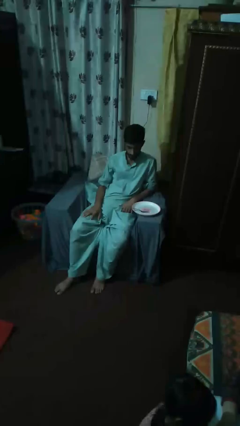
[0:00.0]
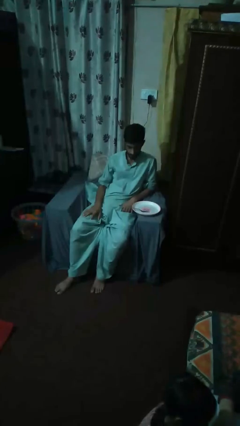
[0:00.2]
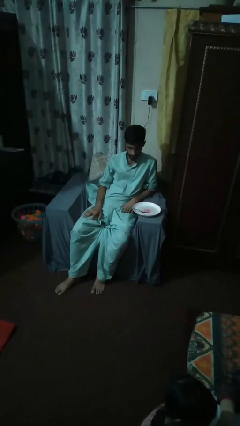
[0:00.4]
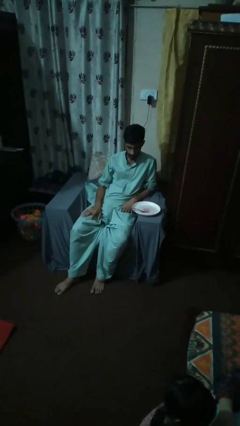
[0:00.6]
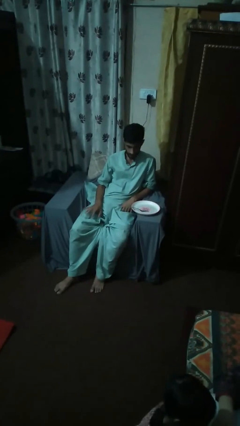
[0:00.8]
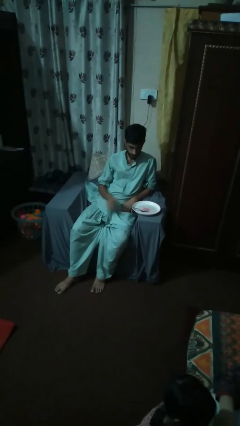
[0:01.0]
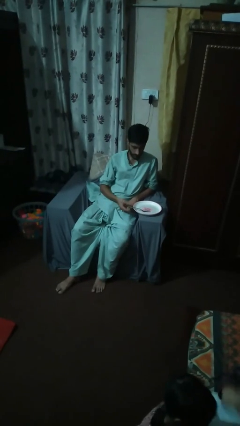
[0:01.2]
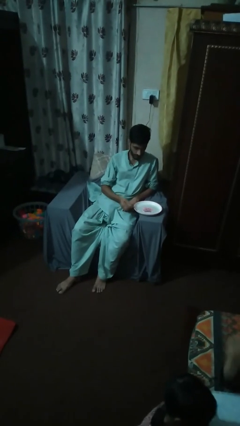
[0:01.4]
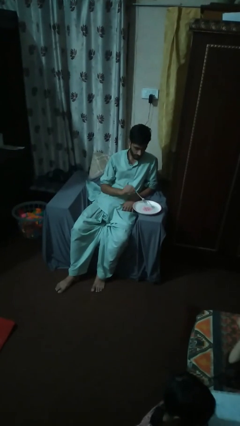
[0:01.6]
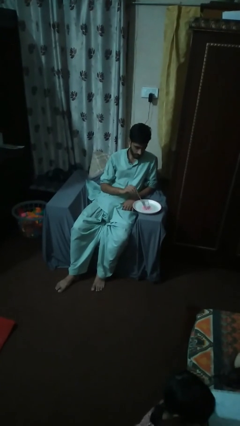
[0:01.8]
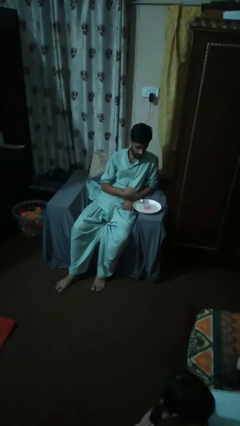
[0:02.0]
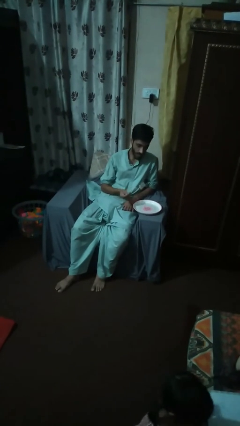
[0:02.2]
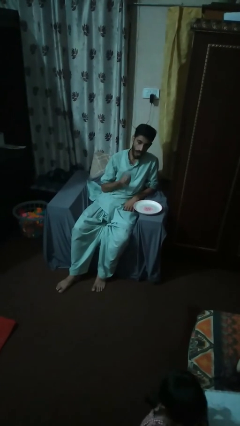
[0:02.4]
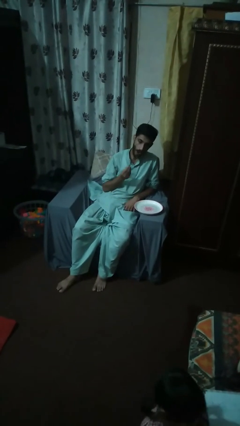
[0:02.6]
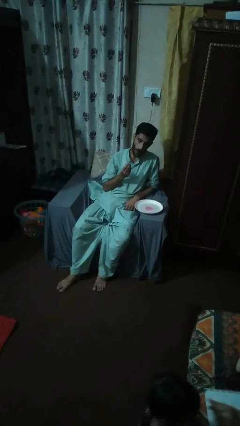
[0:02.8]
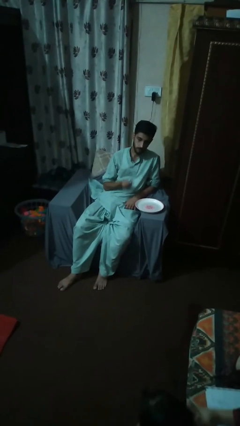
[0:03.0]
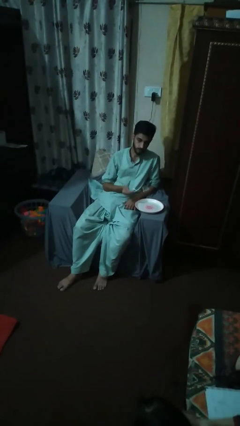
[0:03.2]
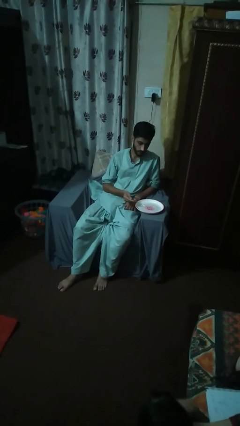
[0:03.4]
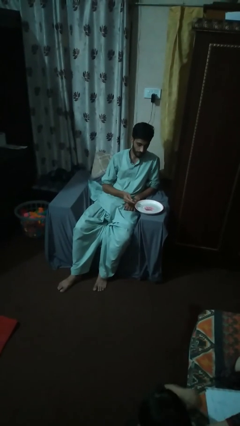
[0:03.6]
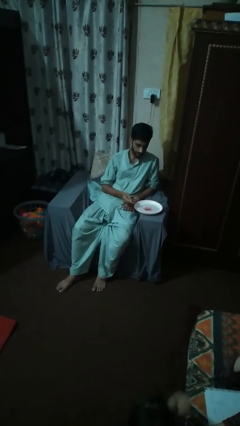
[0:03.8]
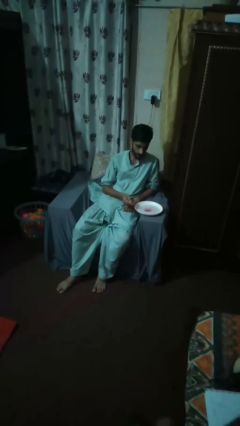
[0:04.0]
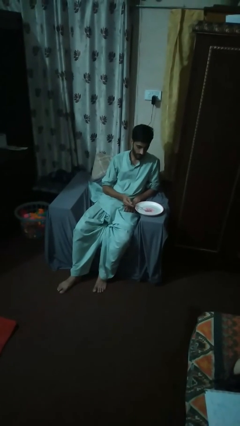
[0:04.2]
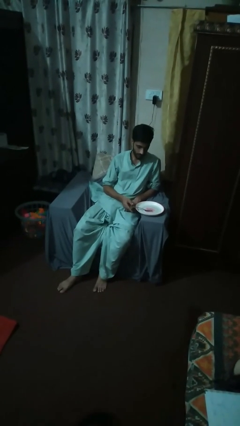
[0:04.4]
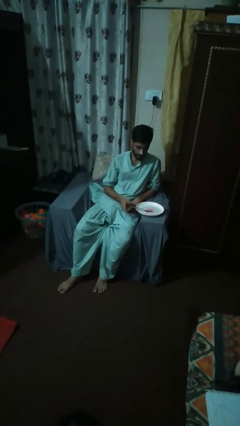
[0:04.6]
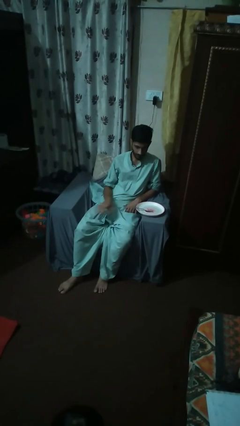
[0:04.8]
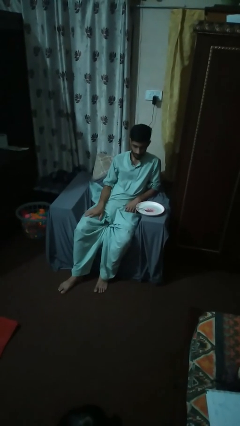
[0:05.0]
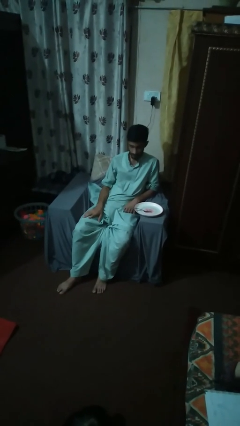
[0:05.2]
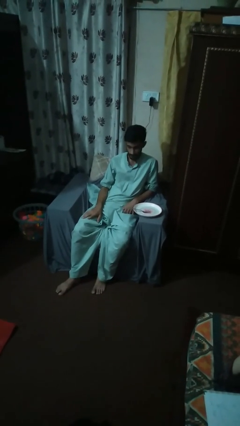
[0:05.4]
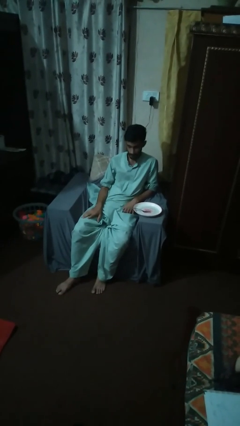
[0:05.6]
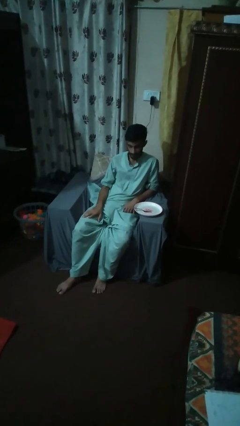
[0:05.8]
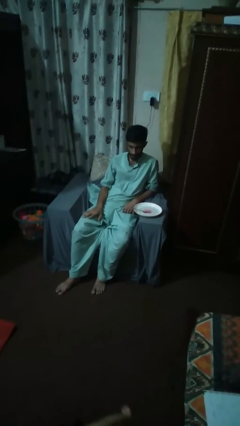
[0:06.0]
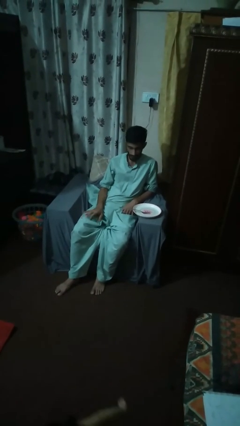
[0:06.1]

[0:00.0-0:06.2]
person eats with utensil

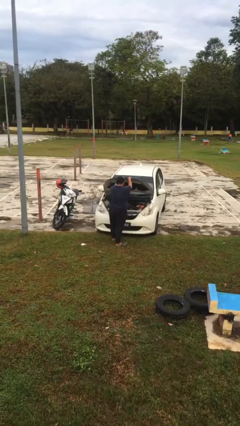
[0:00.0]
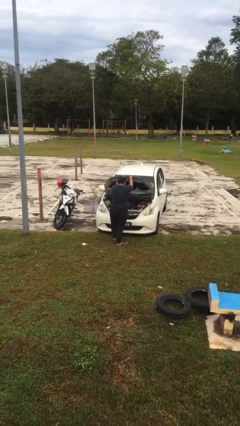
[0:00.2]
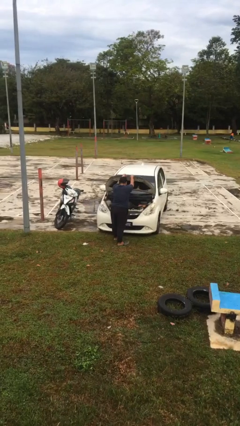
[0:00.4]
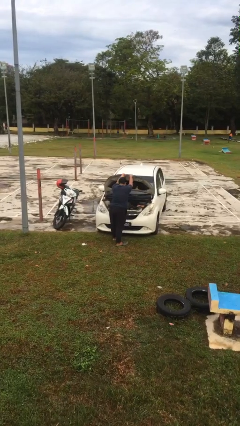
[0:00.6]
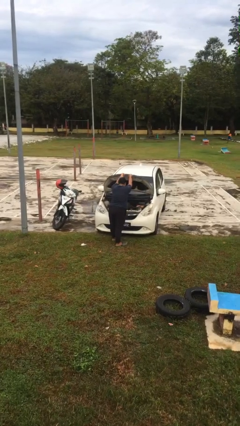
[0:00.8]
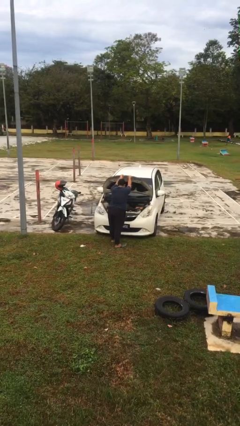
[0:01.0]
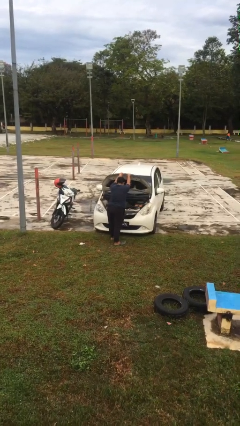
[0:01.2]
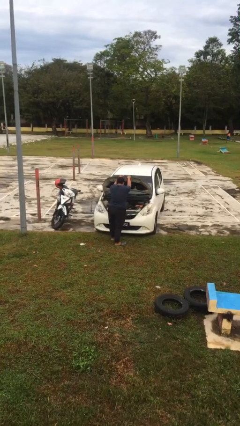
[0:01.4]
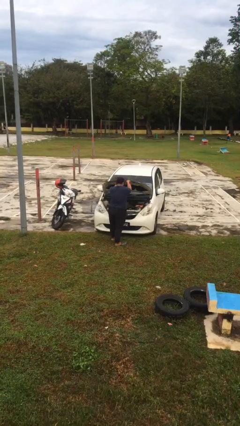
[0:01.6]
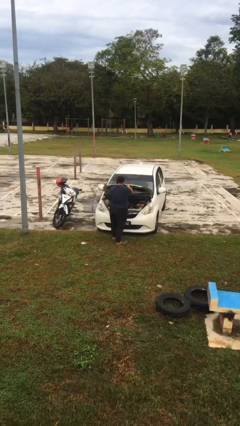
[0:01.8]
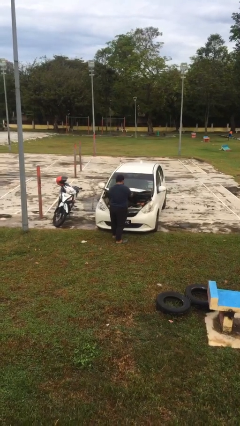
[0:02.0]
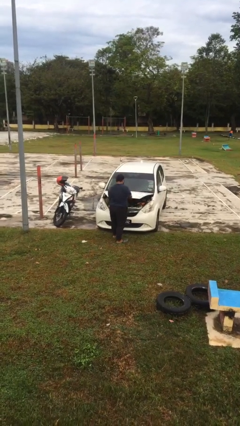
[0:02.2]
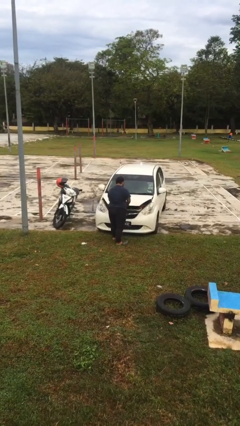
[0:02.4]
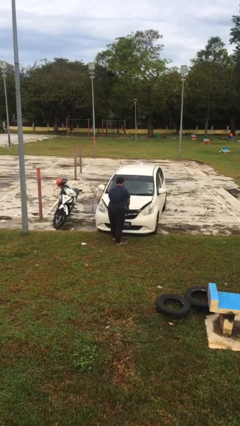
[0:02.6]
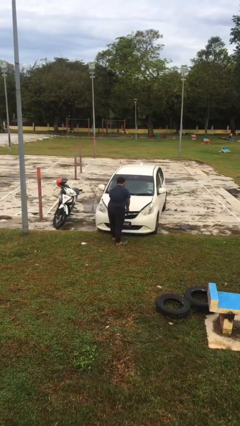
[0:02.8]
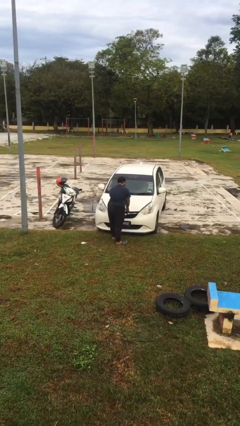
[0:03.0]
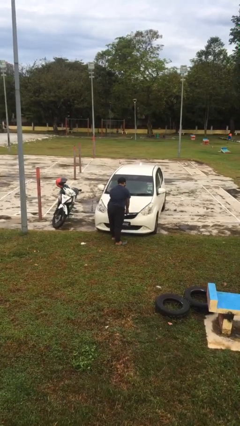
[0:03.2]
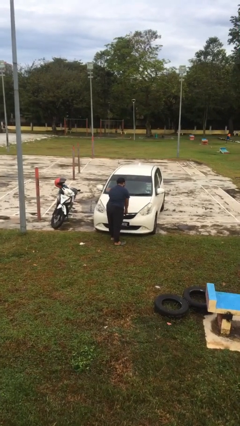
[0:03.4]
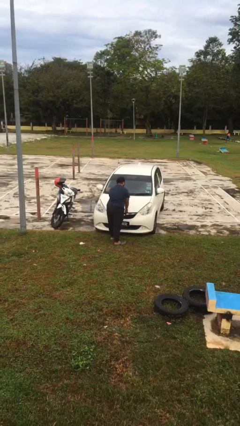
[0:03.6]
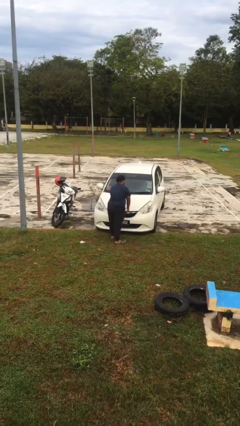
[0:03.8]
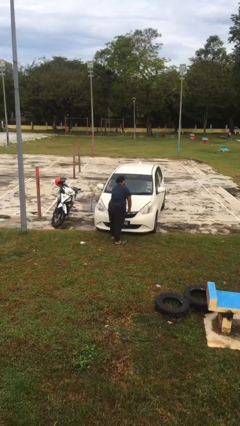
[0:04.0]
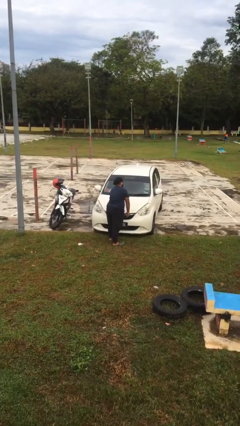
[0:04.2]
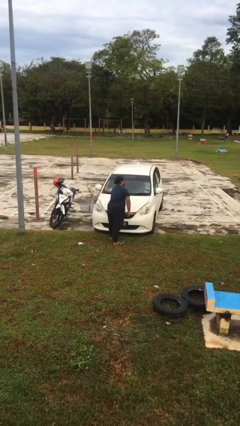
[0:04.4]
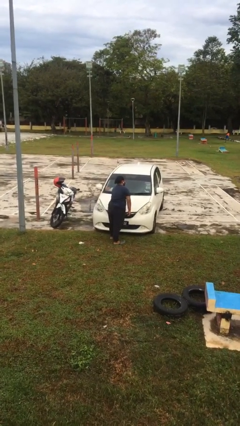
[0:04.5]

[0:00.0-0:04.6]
person closes car hood

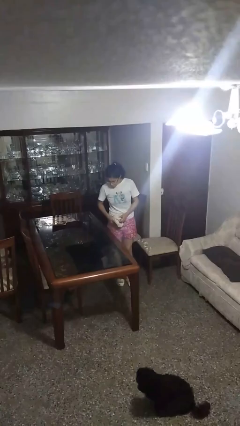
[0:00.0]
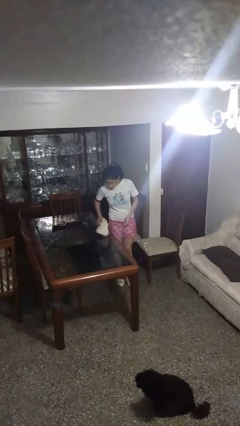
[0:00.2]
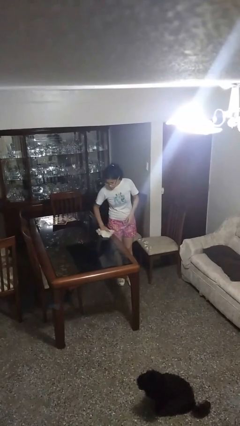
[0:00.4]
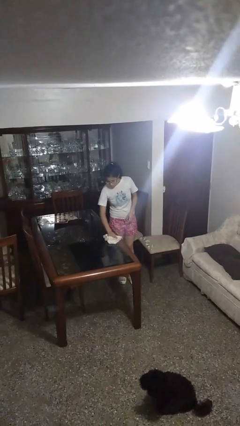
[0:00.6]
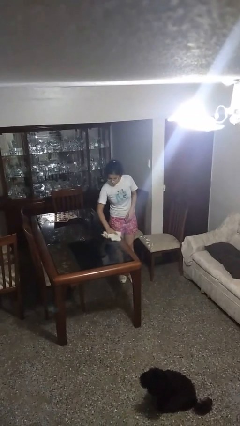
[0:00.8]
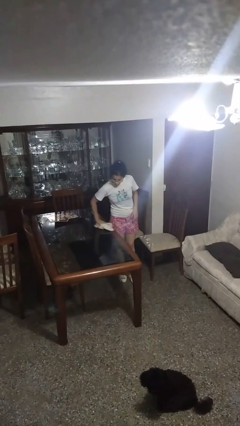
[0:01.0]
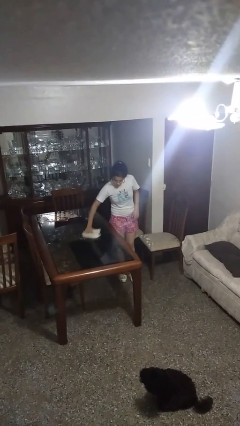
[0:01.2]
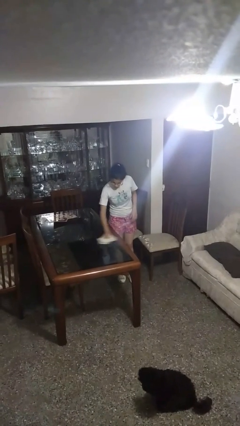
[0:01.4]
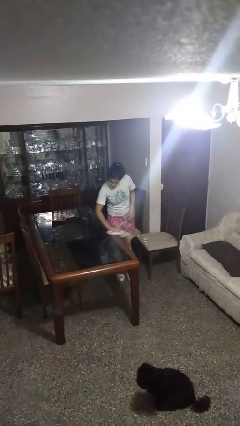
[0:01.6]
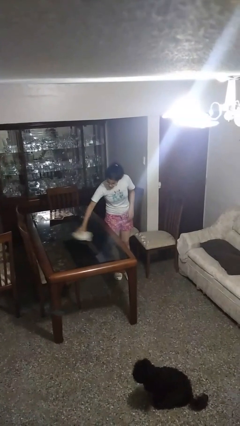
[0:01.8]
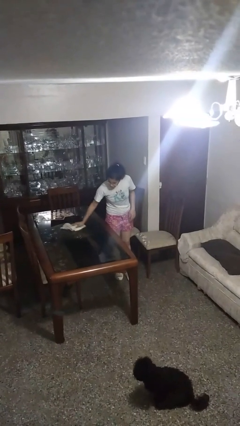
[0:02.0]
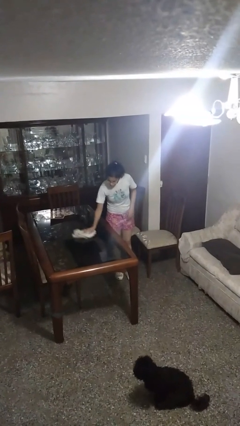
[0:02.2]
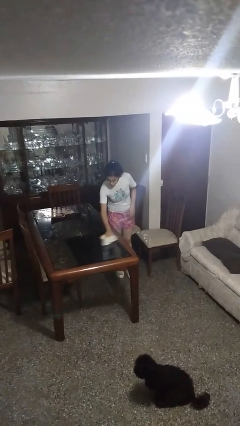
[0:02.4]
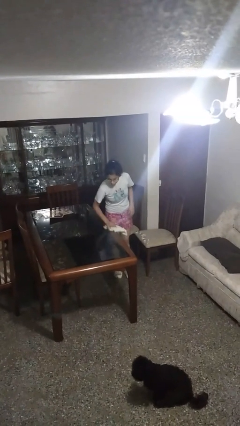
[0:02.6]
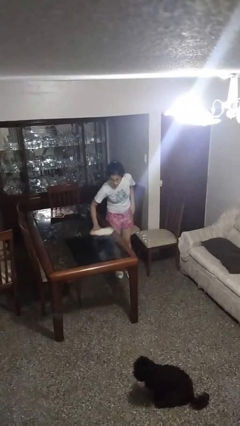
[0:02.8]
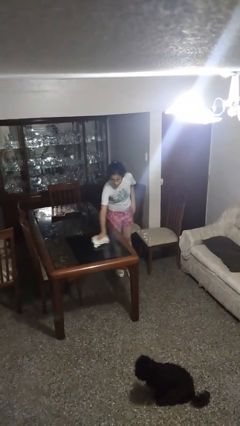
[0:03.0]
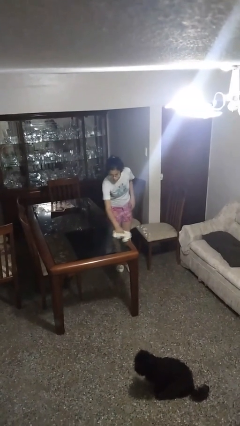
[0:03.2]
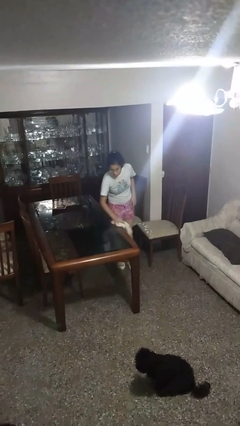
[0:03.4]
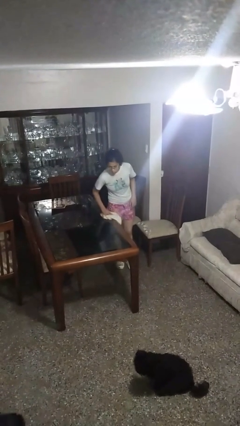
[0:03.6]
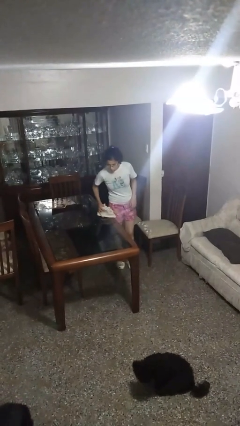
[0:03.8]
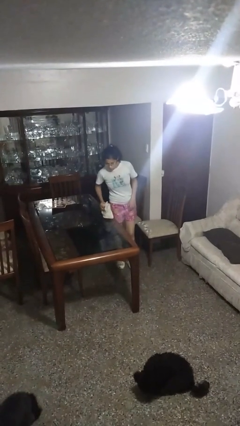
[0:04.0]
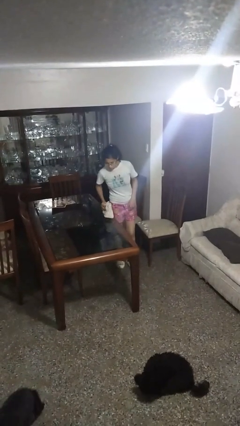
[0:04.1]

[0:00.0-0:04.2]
person cleans table with rag

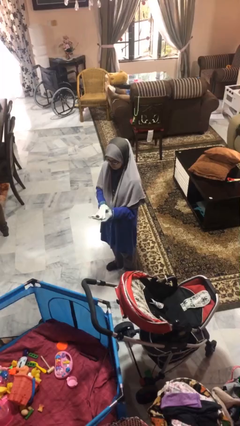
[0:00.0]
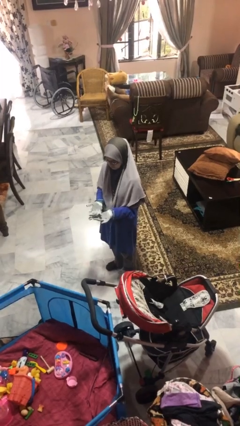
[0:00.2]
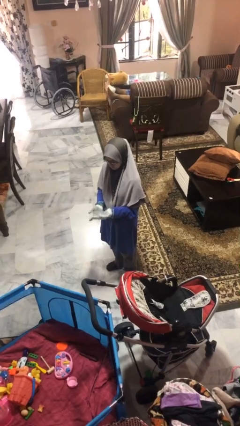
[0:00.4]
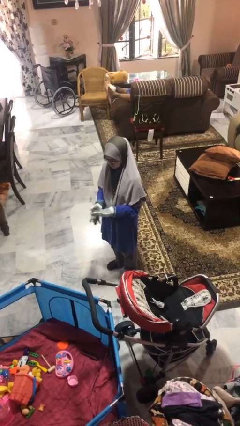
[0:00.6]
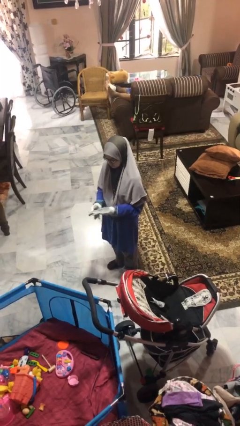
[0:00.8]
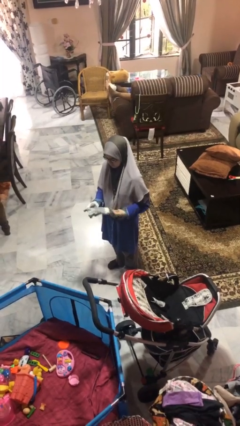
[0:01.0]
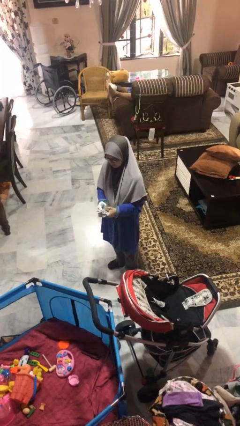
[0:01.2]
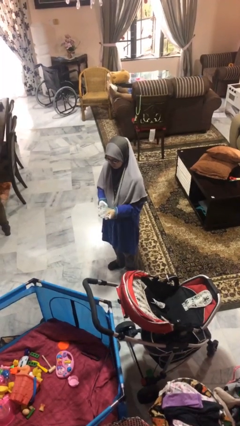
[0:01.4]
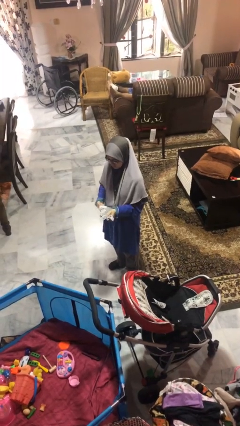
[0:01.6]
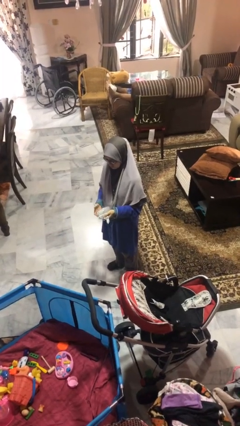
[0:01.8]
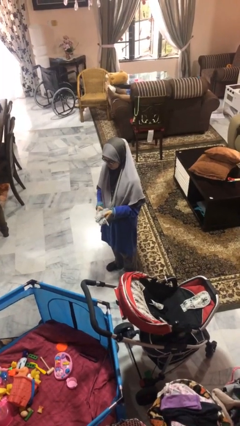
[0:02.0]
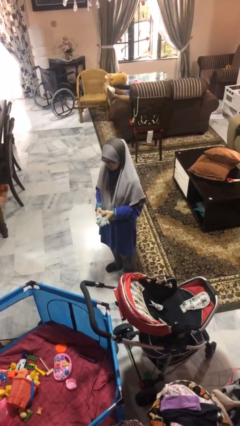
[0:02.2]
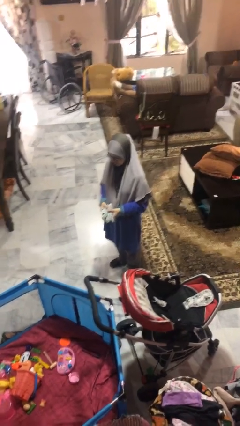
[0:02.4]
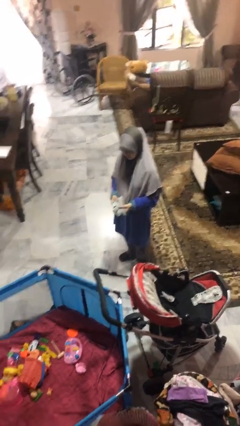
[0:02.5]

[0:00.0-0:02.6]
person takes off gloves

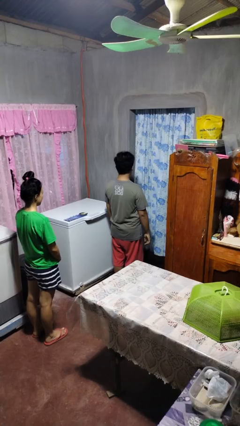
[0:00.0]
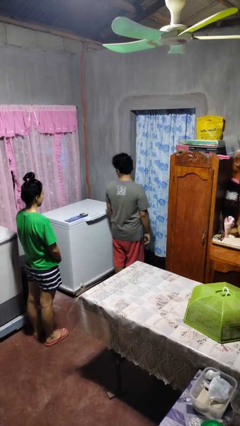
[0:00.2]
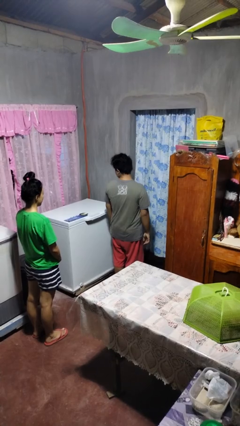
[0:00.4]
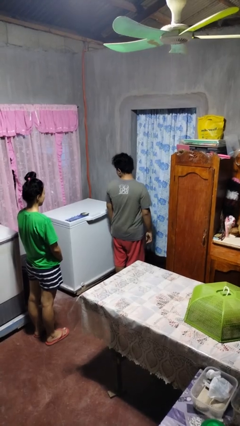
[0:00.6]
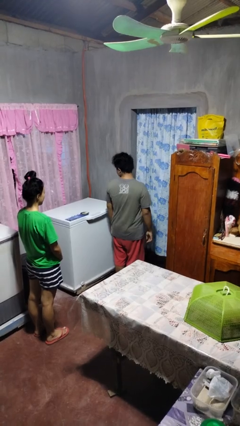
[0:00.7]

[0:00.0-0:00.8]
person looks over shoulder
